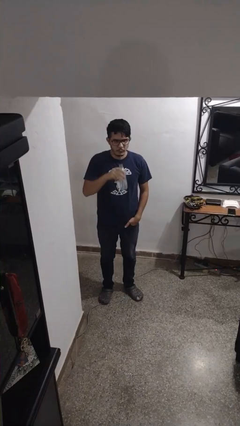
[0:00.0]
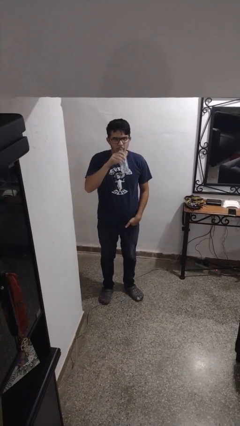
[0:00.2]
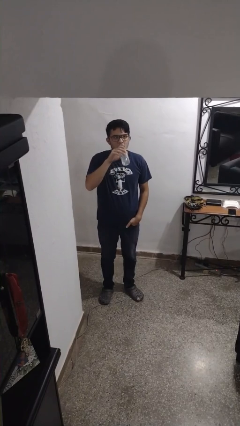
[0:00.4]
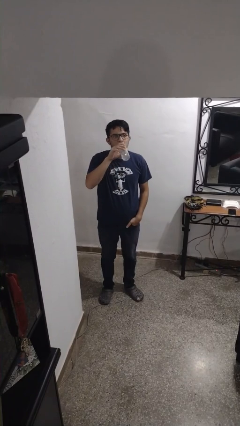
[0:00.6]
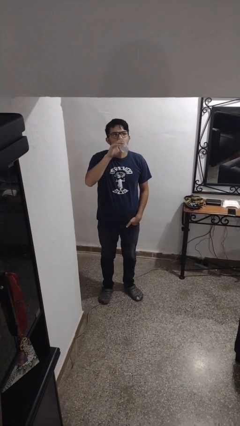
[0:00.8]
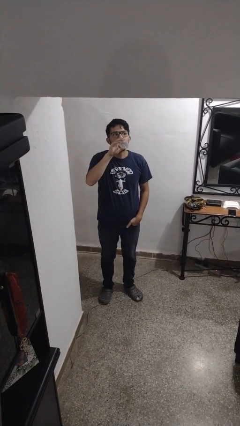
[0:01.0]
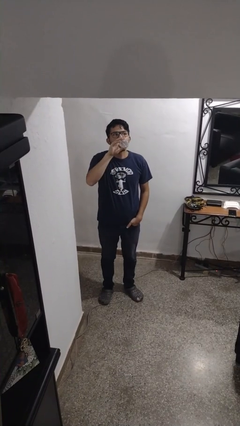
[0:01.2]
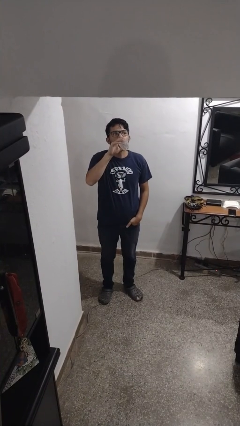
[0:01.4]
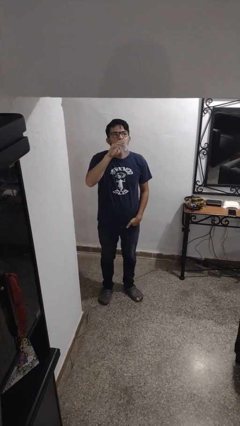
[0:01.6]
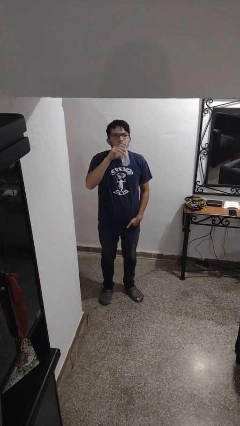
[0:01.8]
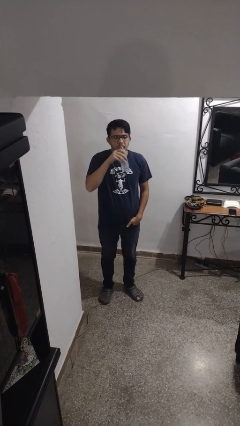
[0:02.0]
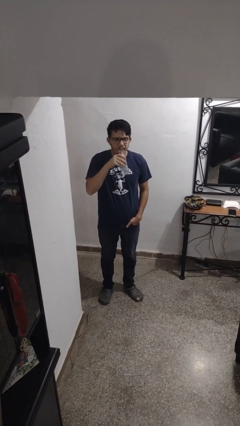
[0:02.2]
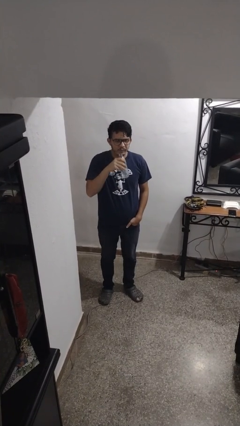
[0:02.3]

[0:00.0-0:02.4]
person drinks from bottle

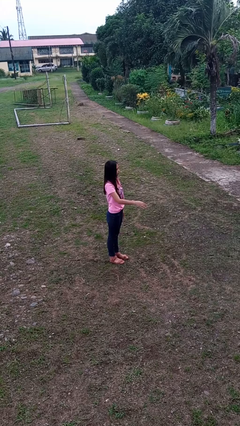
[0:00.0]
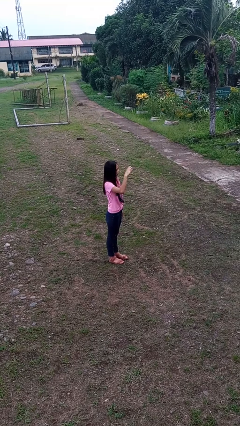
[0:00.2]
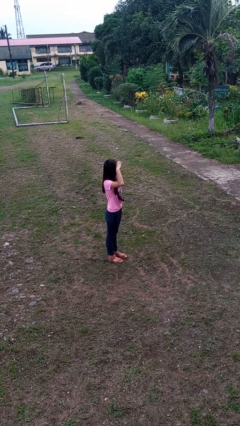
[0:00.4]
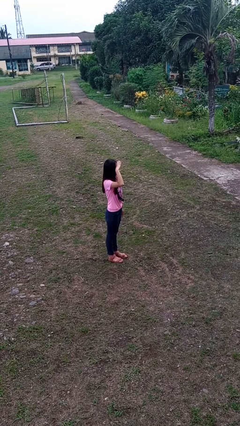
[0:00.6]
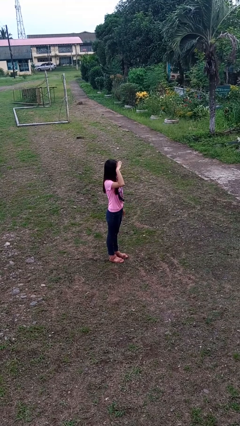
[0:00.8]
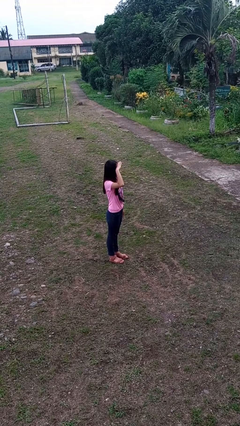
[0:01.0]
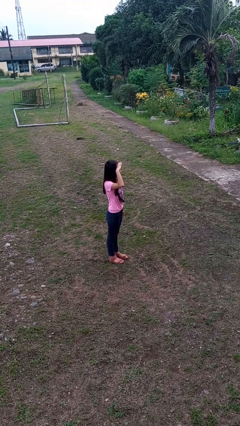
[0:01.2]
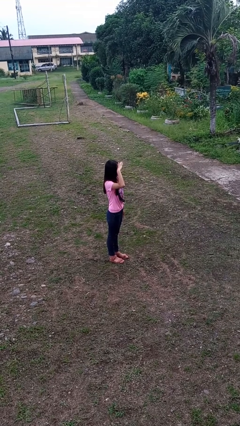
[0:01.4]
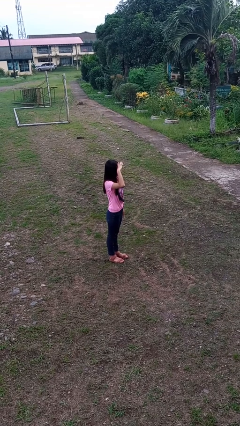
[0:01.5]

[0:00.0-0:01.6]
person salutes

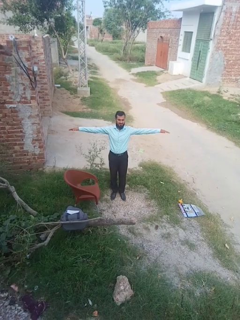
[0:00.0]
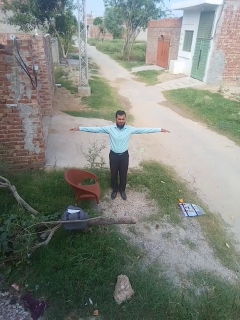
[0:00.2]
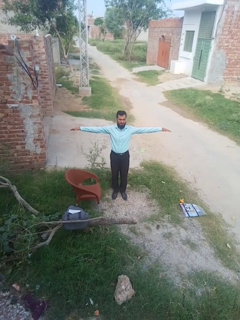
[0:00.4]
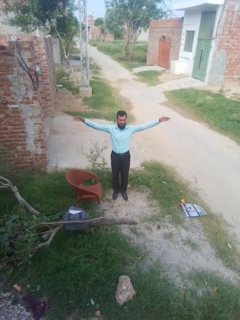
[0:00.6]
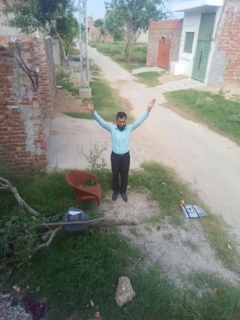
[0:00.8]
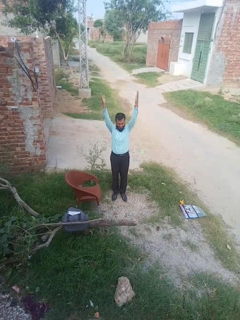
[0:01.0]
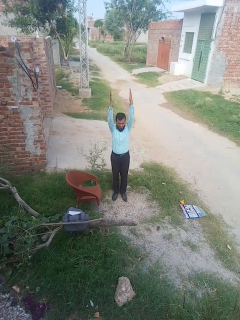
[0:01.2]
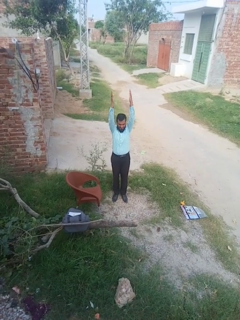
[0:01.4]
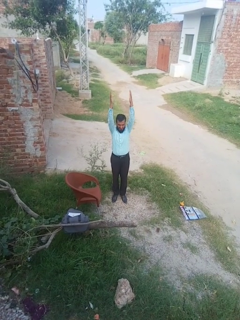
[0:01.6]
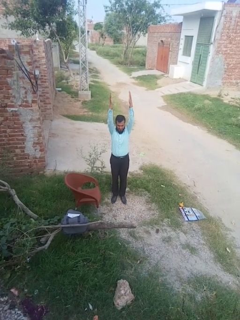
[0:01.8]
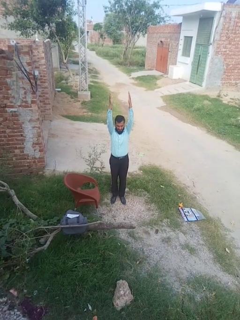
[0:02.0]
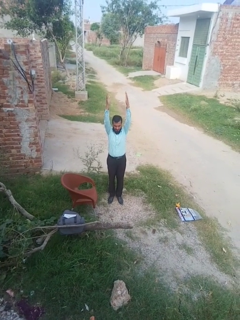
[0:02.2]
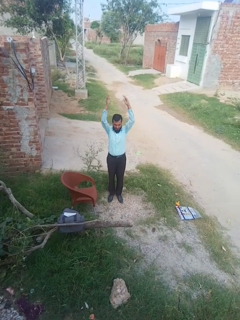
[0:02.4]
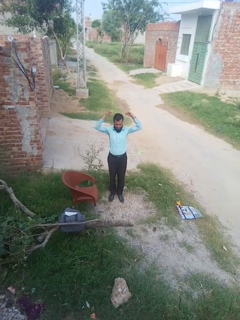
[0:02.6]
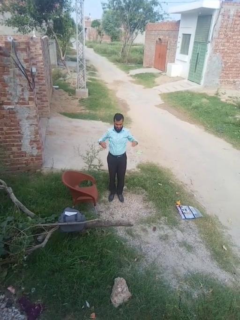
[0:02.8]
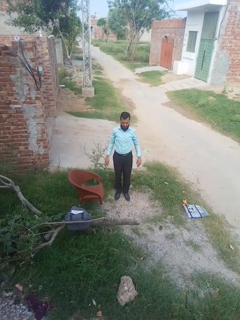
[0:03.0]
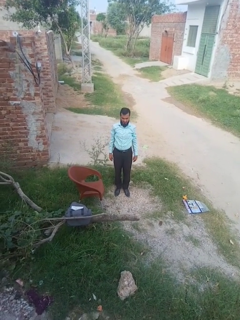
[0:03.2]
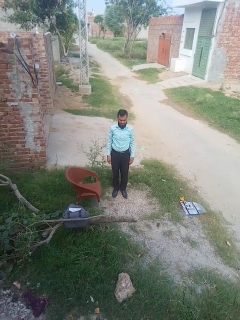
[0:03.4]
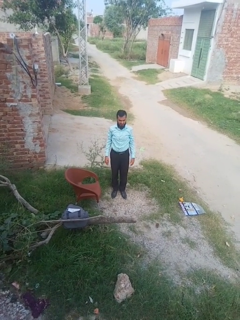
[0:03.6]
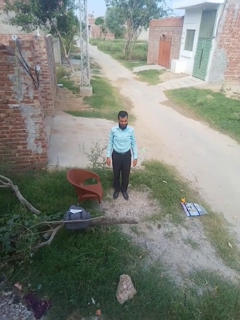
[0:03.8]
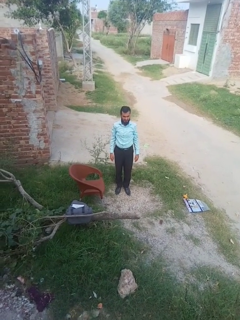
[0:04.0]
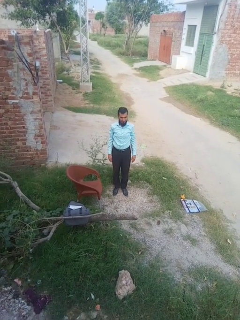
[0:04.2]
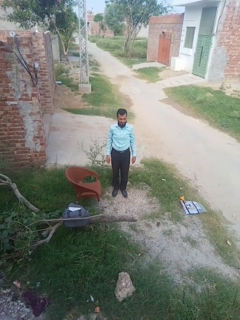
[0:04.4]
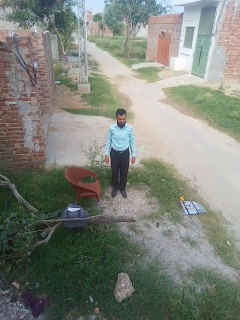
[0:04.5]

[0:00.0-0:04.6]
person stretches arms over head

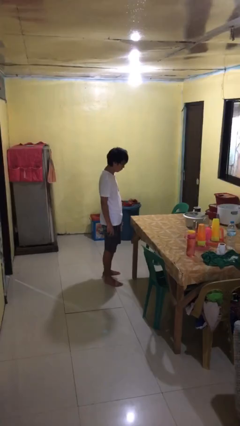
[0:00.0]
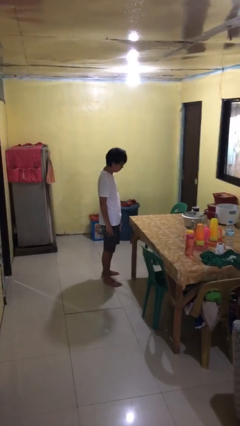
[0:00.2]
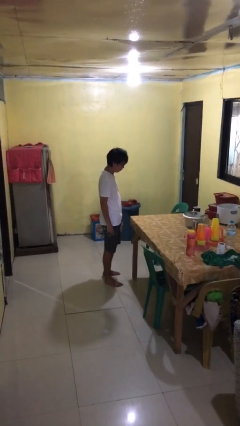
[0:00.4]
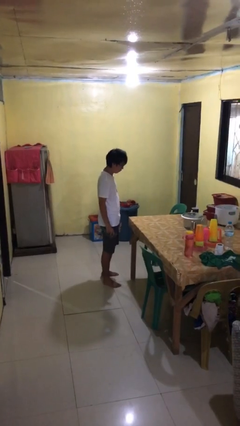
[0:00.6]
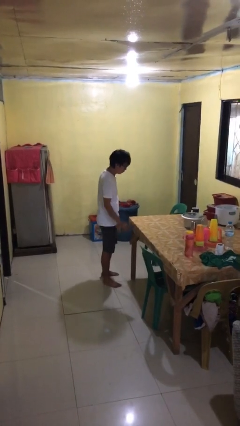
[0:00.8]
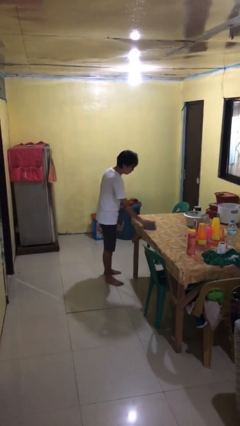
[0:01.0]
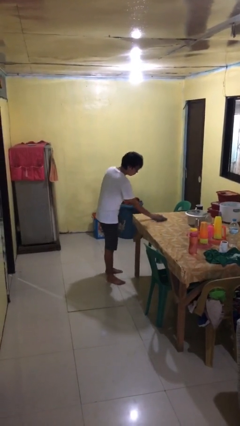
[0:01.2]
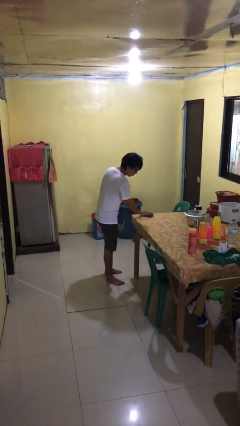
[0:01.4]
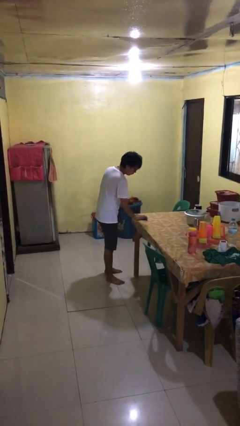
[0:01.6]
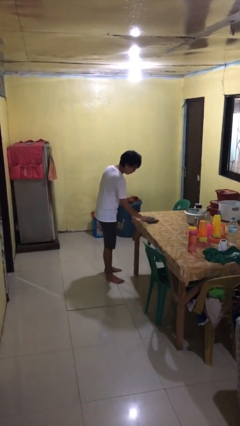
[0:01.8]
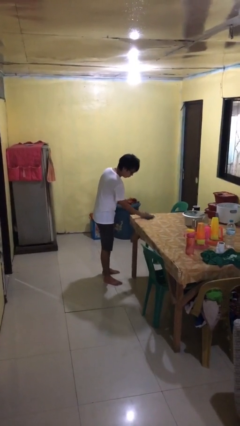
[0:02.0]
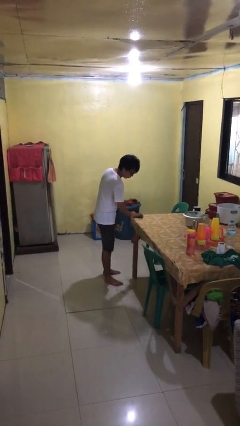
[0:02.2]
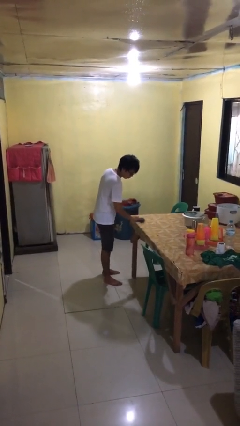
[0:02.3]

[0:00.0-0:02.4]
person cleans table with rag

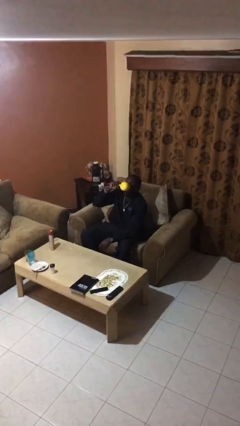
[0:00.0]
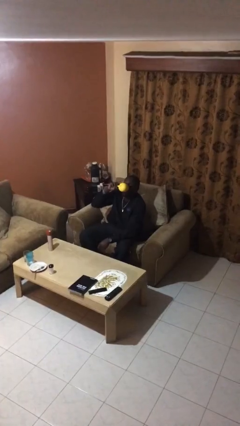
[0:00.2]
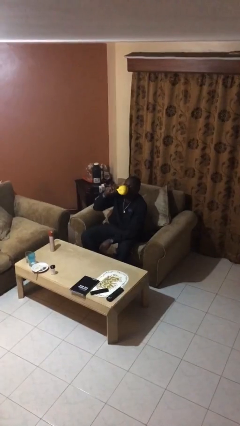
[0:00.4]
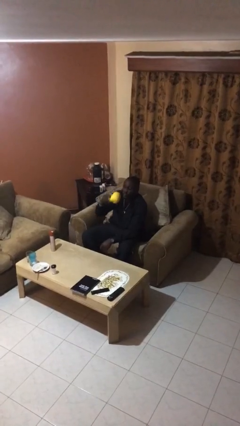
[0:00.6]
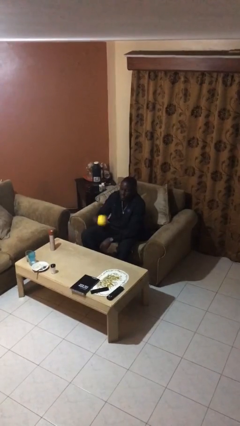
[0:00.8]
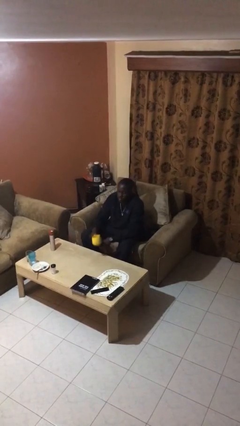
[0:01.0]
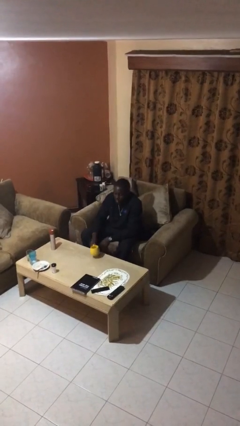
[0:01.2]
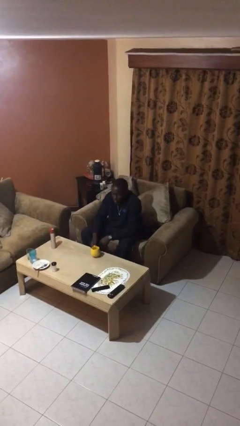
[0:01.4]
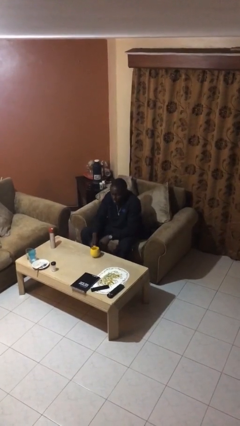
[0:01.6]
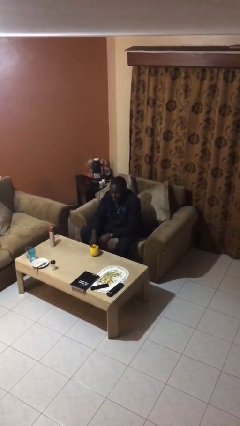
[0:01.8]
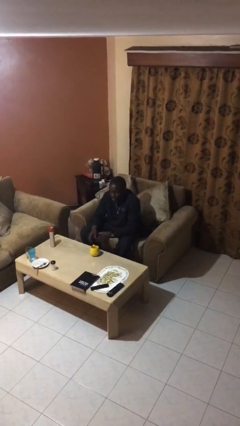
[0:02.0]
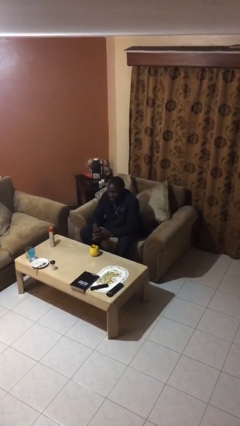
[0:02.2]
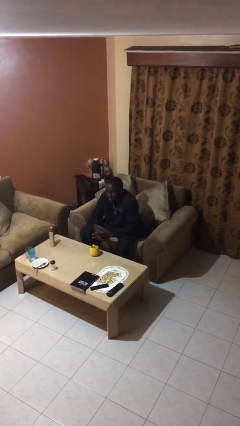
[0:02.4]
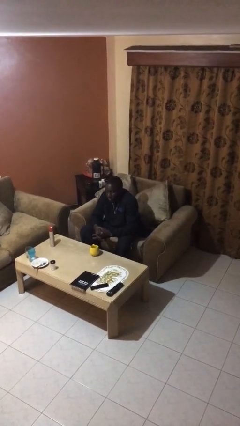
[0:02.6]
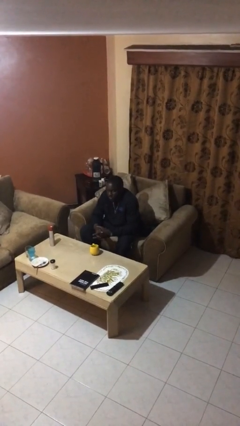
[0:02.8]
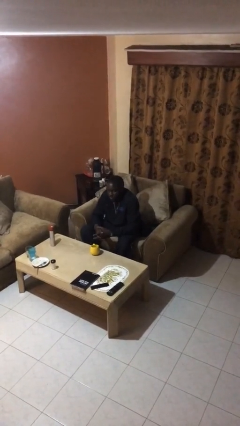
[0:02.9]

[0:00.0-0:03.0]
person puts down object on table

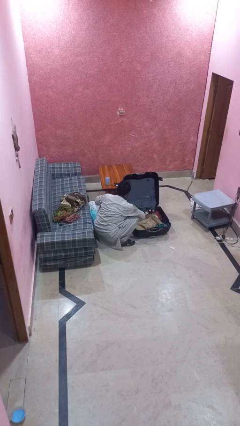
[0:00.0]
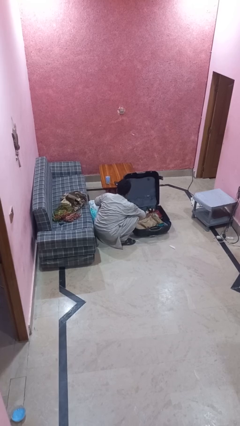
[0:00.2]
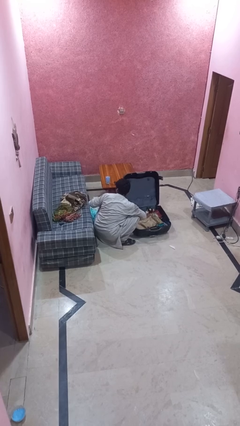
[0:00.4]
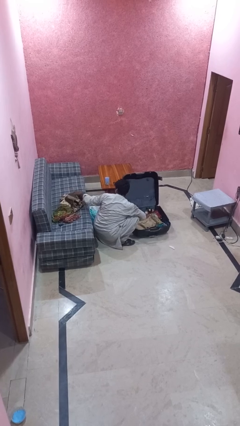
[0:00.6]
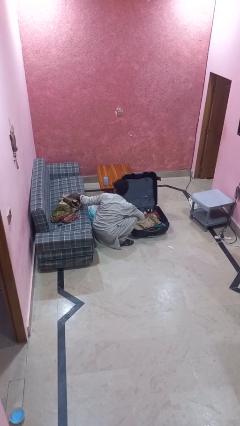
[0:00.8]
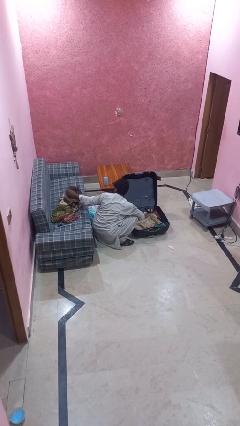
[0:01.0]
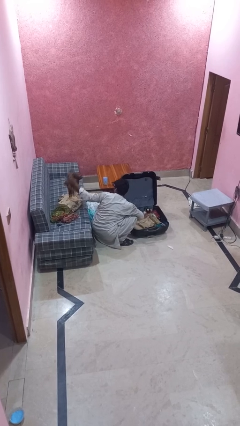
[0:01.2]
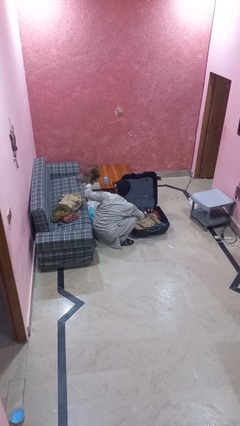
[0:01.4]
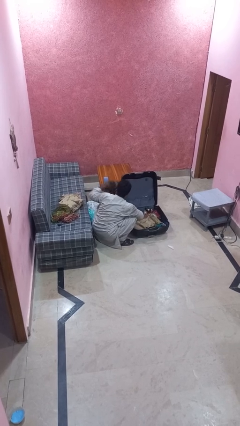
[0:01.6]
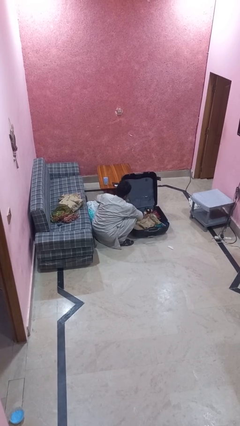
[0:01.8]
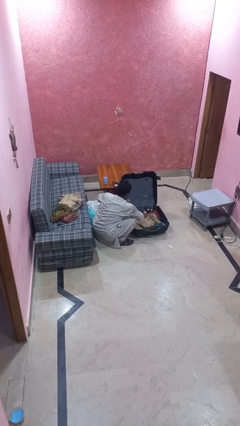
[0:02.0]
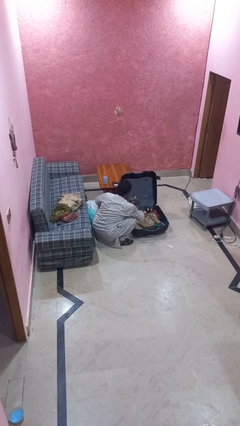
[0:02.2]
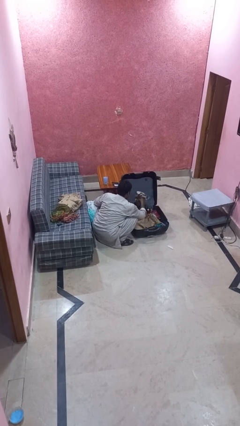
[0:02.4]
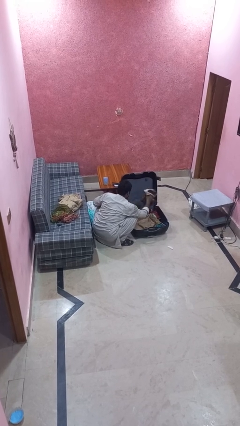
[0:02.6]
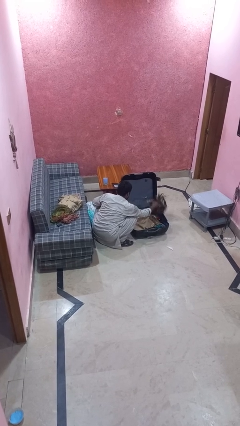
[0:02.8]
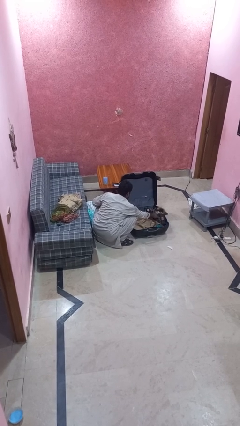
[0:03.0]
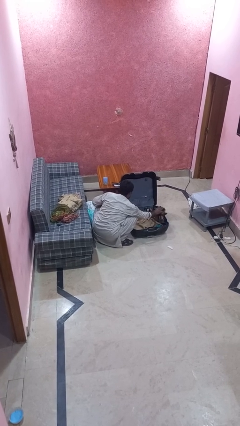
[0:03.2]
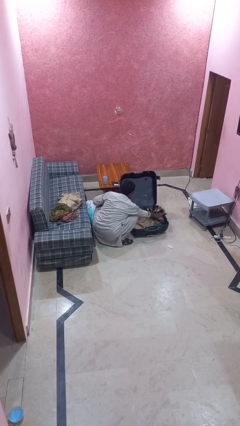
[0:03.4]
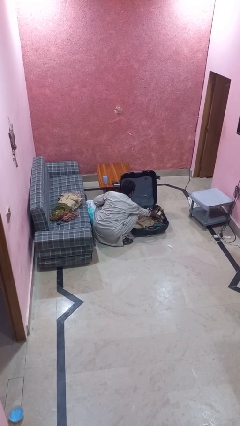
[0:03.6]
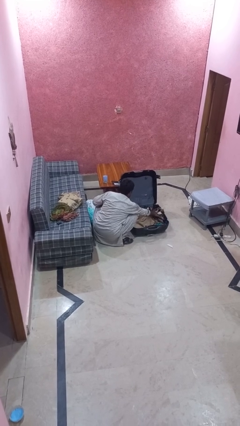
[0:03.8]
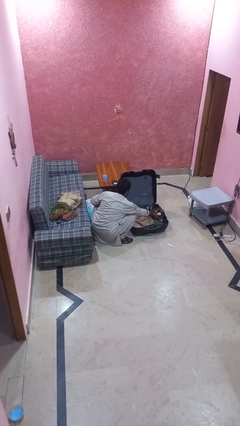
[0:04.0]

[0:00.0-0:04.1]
person loads clothes into suitcase

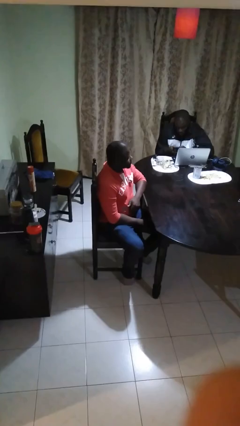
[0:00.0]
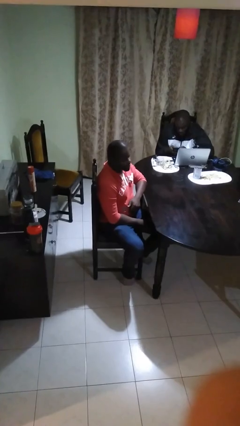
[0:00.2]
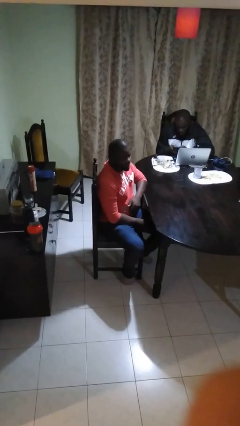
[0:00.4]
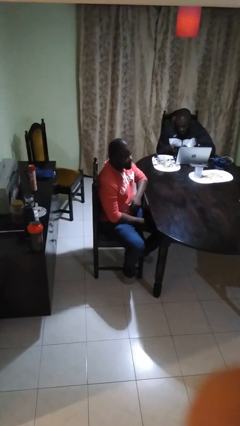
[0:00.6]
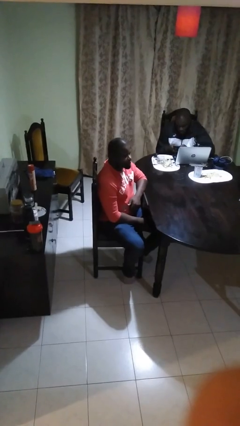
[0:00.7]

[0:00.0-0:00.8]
person shakes head
